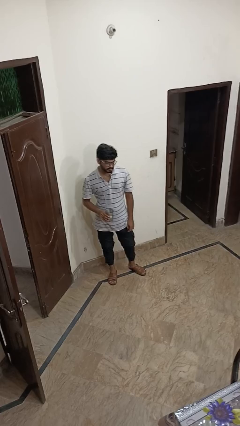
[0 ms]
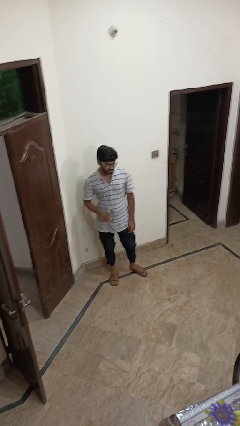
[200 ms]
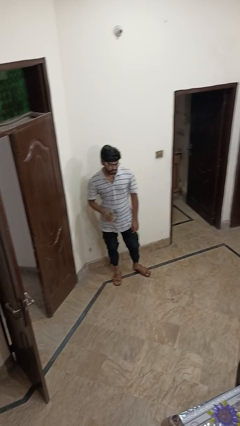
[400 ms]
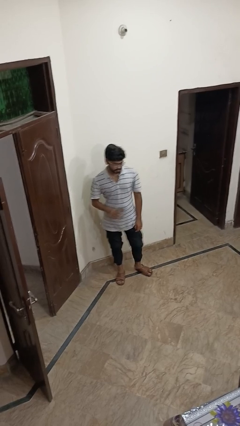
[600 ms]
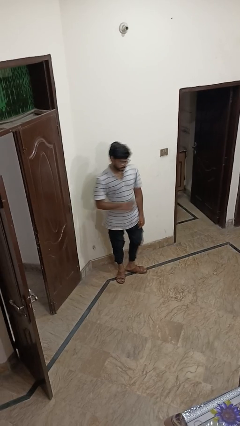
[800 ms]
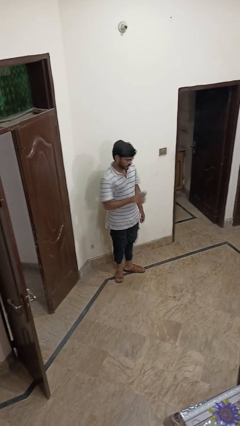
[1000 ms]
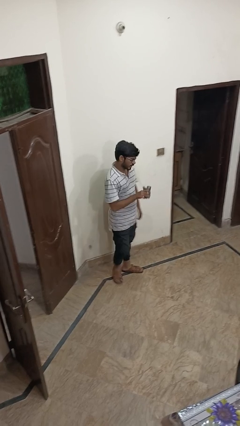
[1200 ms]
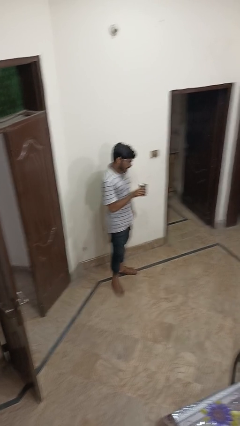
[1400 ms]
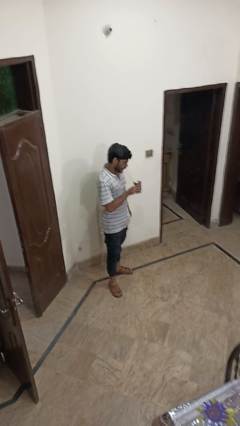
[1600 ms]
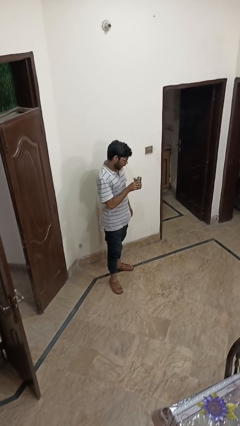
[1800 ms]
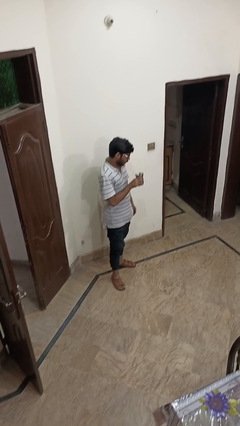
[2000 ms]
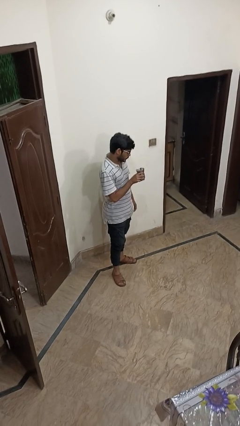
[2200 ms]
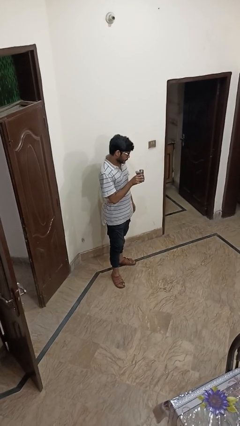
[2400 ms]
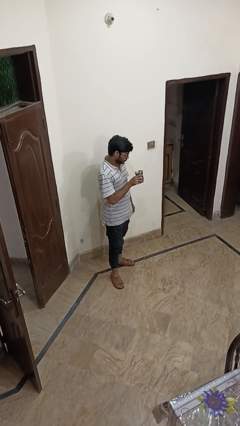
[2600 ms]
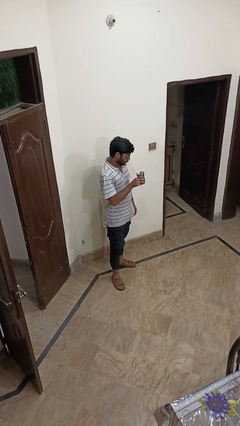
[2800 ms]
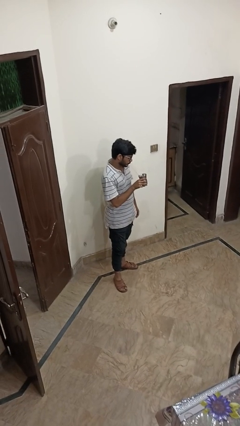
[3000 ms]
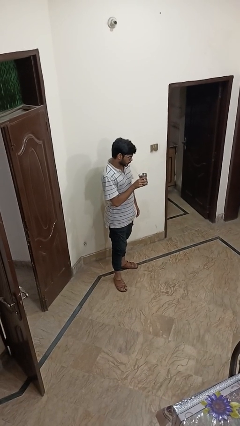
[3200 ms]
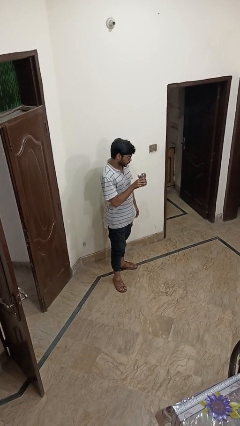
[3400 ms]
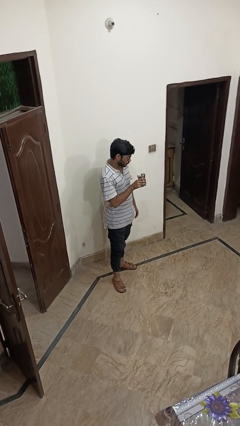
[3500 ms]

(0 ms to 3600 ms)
person drinks from straw

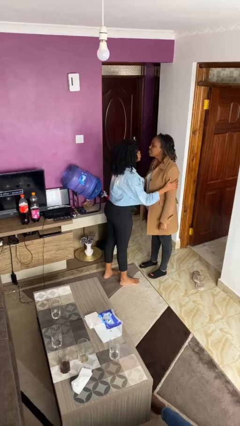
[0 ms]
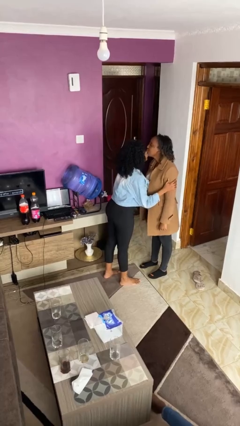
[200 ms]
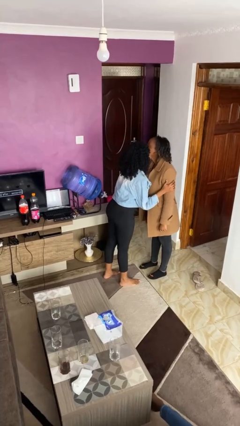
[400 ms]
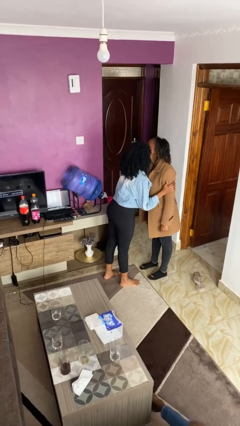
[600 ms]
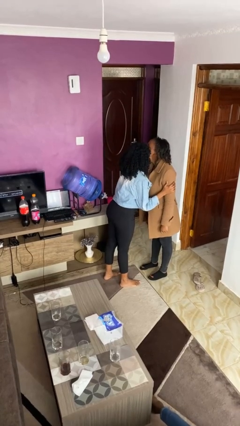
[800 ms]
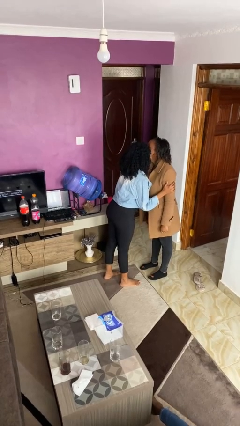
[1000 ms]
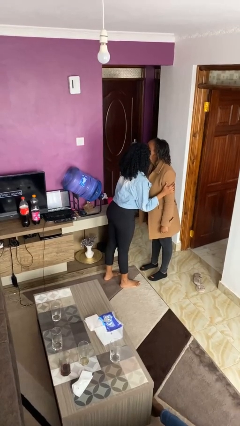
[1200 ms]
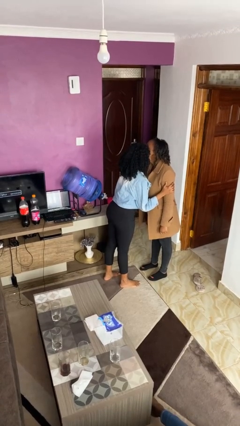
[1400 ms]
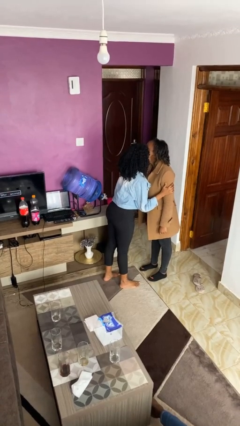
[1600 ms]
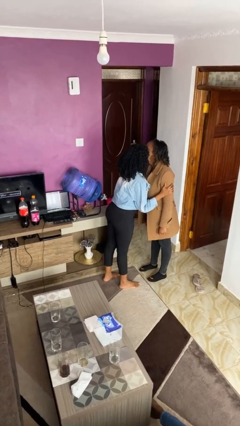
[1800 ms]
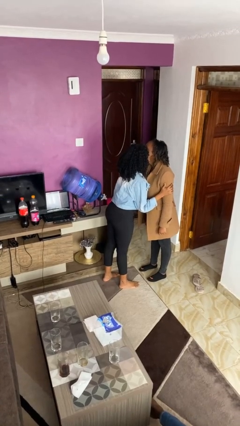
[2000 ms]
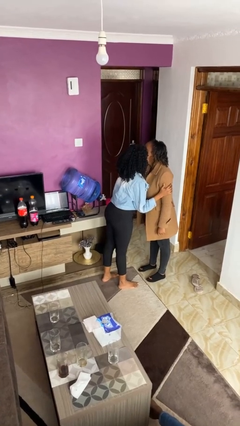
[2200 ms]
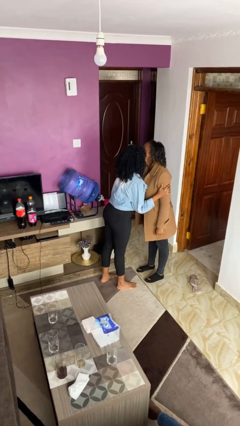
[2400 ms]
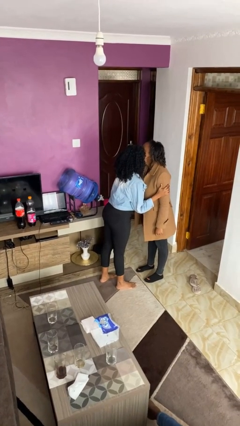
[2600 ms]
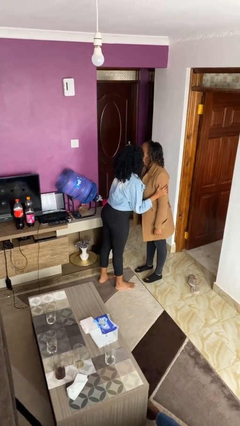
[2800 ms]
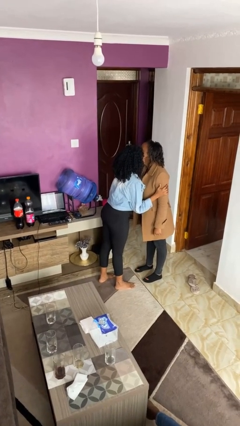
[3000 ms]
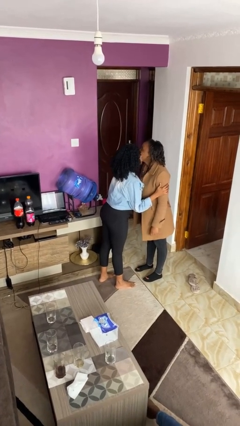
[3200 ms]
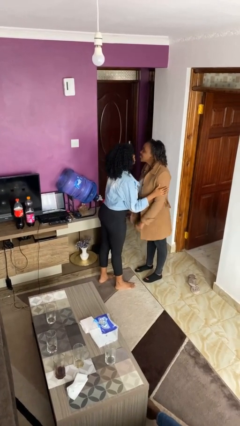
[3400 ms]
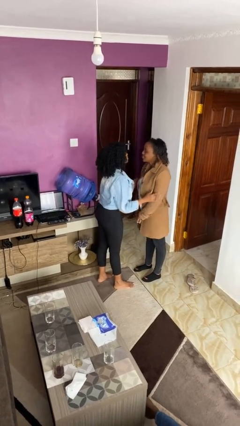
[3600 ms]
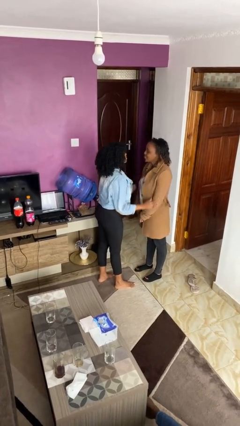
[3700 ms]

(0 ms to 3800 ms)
person kisses cheek of person

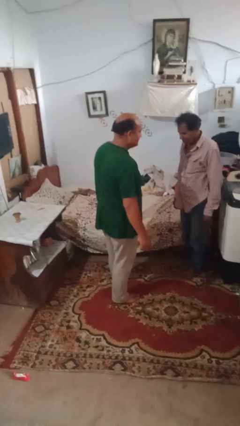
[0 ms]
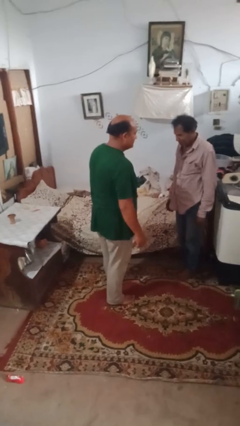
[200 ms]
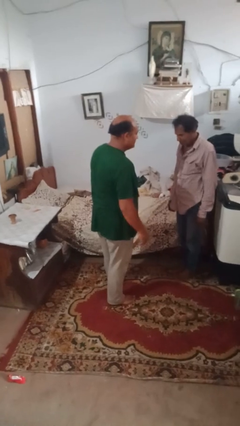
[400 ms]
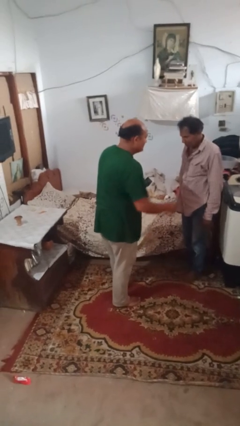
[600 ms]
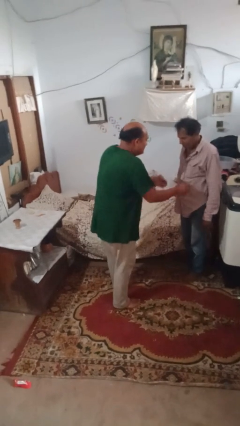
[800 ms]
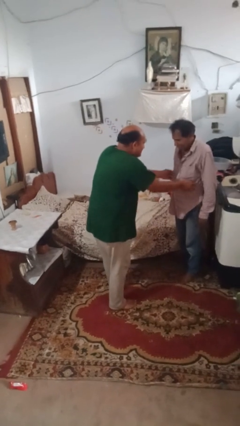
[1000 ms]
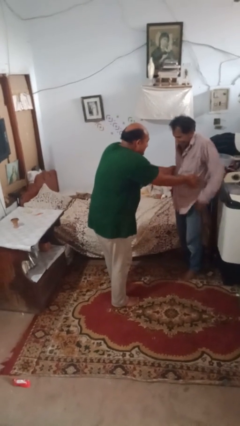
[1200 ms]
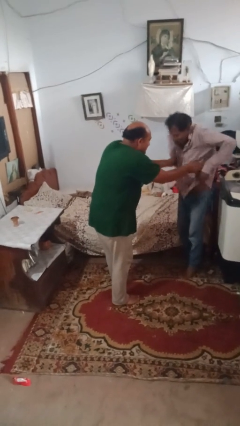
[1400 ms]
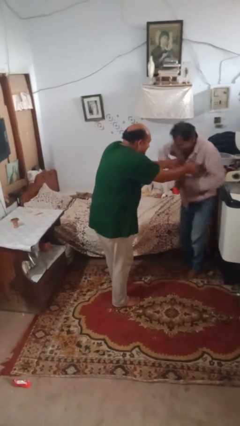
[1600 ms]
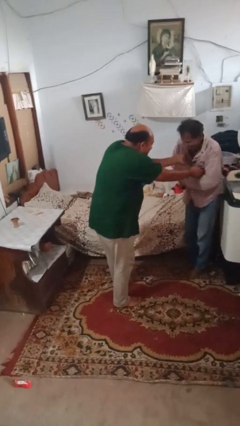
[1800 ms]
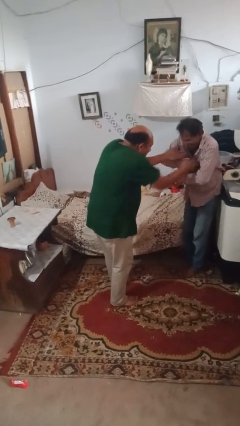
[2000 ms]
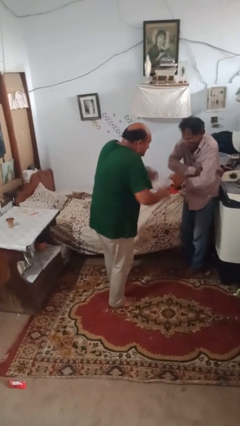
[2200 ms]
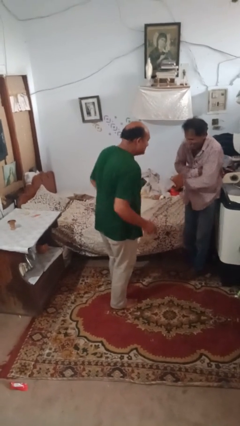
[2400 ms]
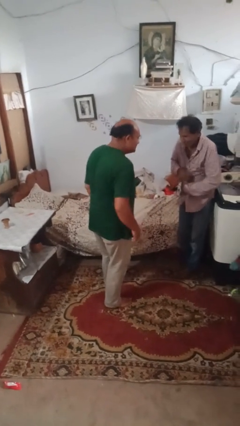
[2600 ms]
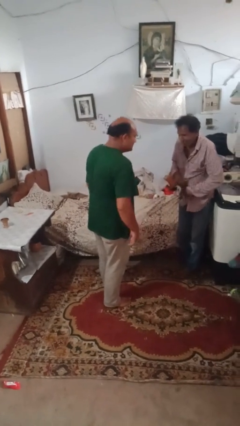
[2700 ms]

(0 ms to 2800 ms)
person tickles person

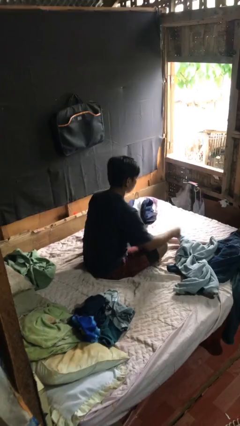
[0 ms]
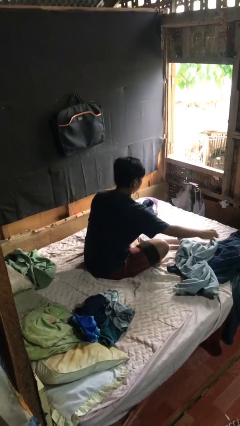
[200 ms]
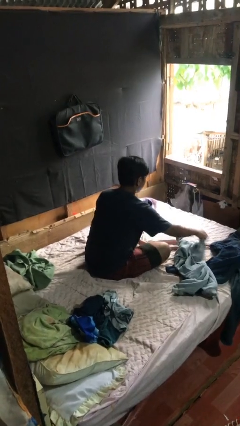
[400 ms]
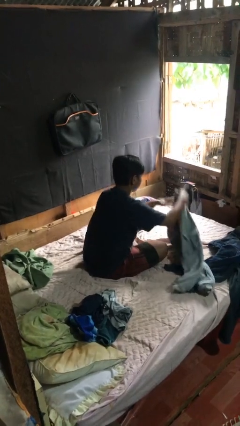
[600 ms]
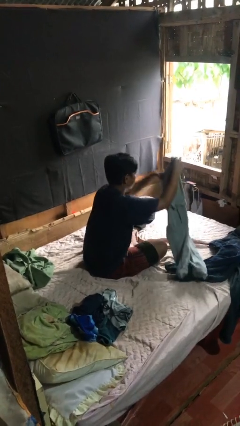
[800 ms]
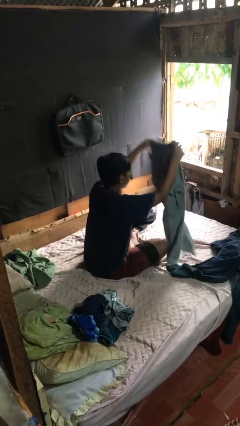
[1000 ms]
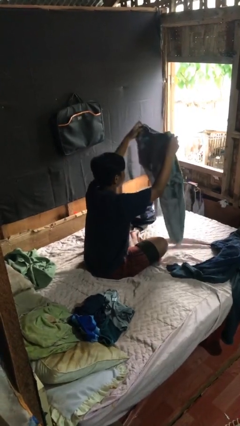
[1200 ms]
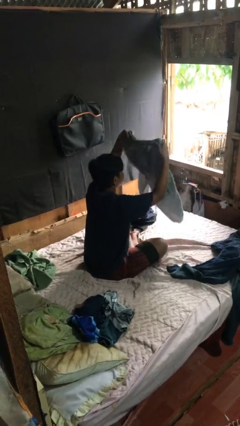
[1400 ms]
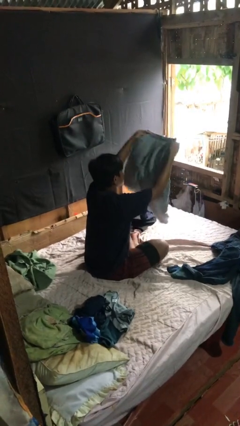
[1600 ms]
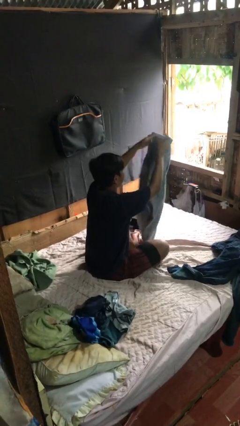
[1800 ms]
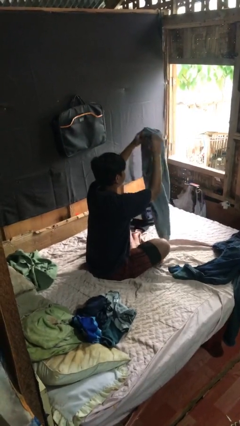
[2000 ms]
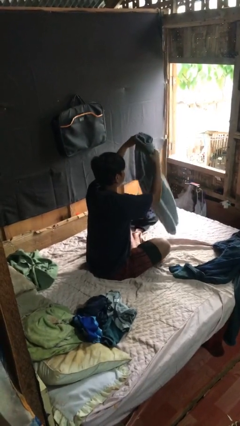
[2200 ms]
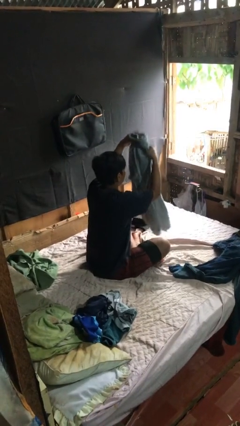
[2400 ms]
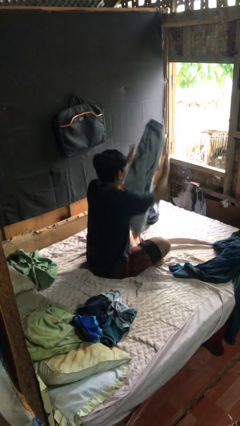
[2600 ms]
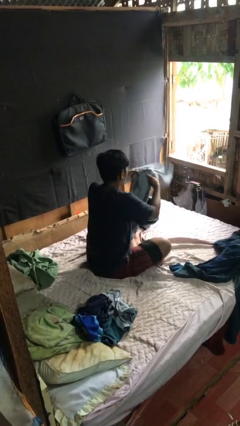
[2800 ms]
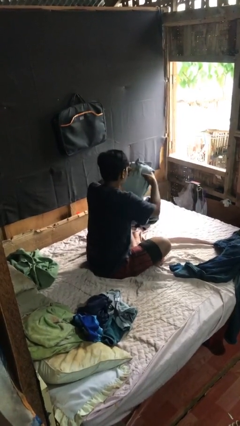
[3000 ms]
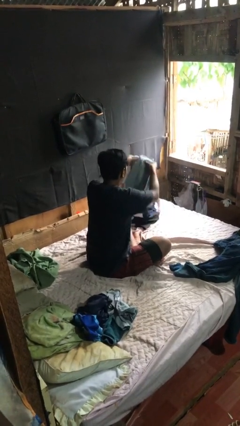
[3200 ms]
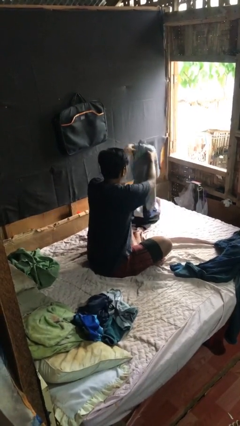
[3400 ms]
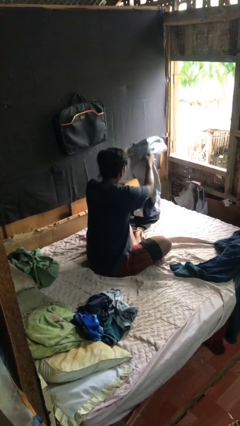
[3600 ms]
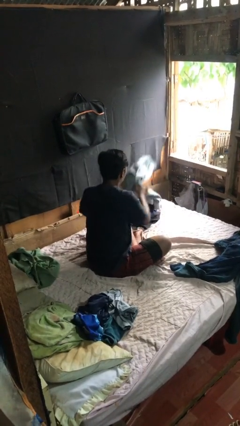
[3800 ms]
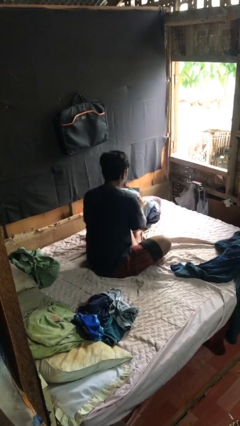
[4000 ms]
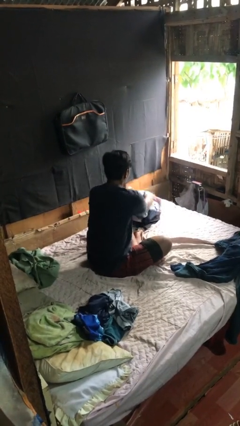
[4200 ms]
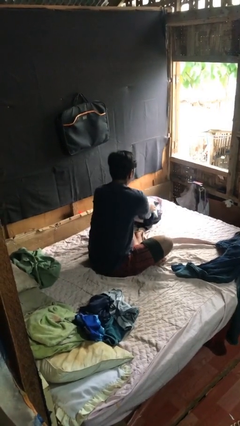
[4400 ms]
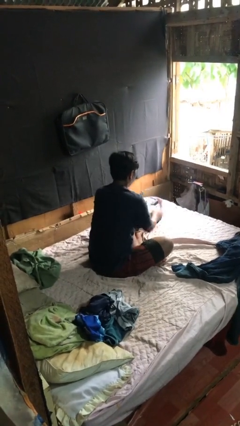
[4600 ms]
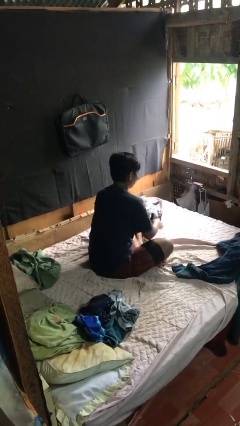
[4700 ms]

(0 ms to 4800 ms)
person folds pants

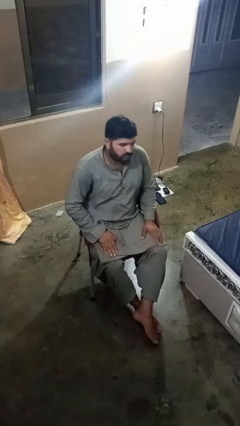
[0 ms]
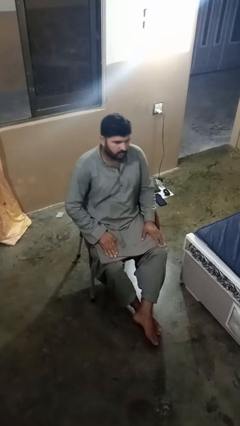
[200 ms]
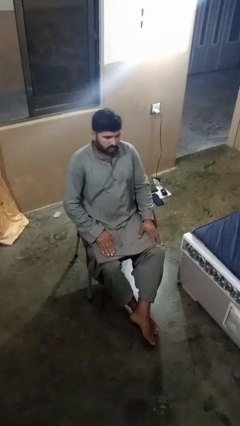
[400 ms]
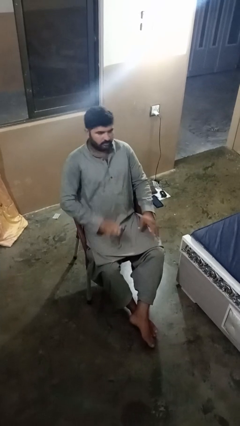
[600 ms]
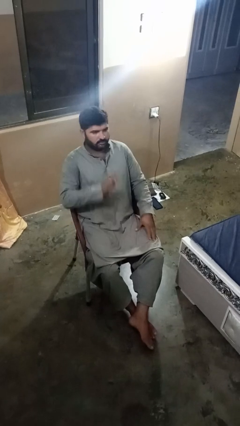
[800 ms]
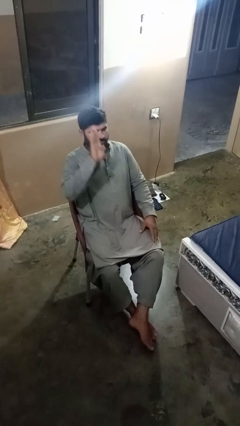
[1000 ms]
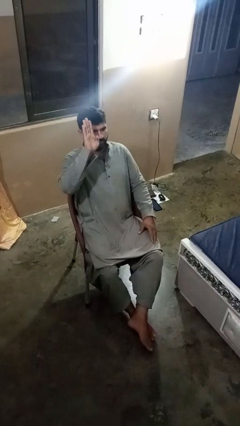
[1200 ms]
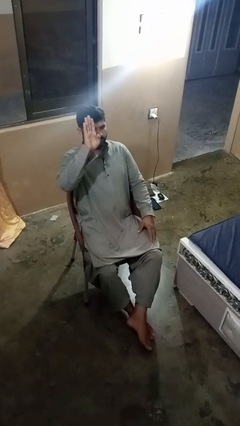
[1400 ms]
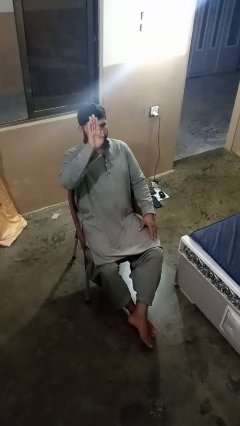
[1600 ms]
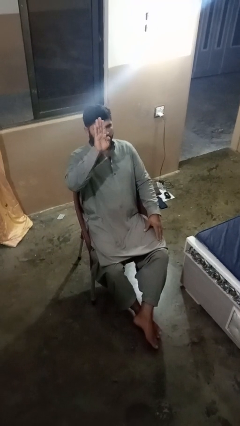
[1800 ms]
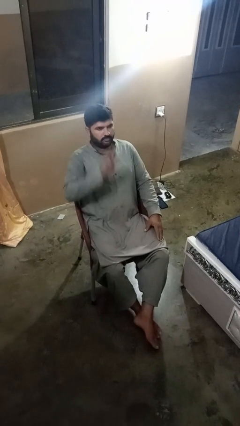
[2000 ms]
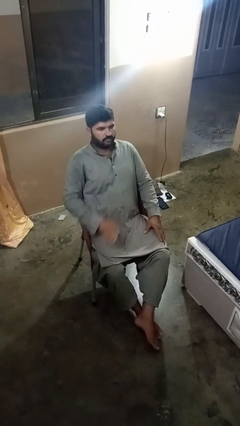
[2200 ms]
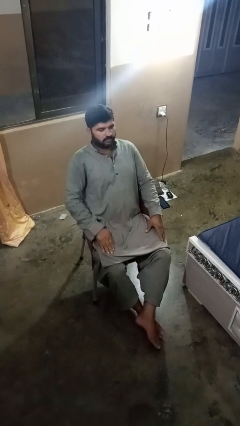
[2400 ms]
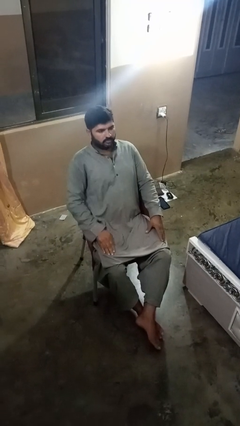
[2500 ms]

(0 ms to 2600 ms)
person gestures number four
